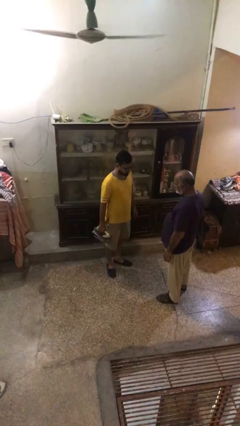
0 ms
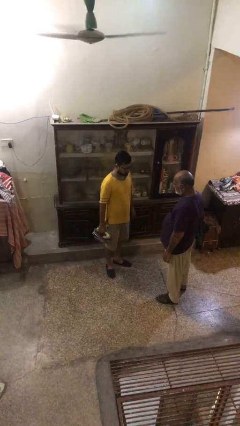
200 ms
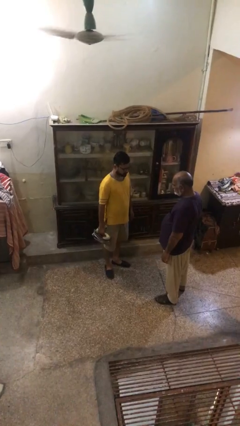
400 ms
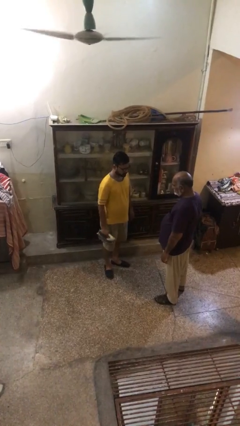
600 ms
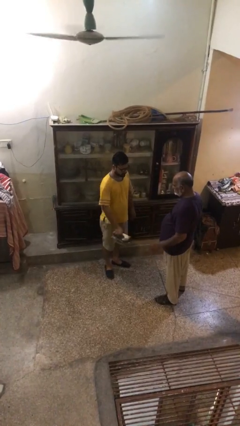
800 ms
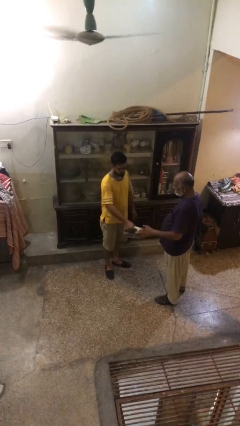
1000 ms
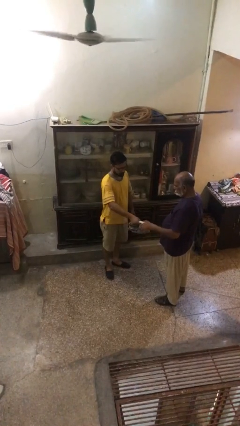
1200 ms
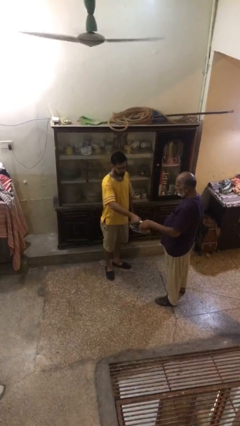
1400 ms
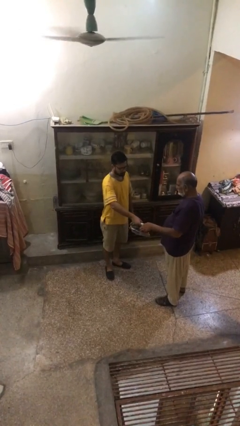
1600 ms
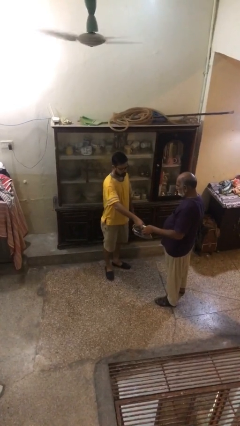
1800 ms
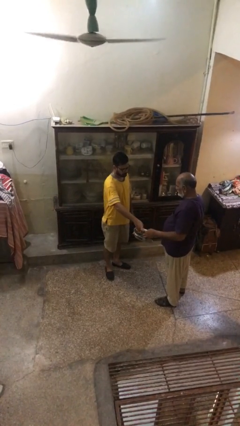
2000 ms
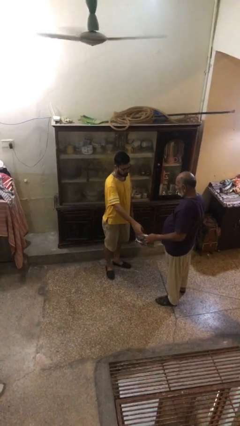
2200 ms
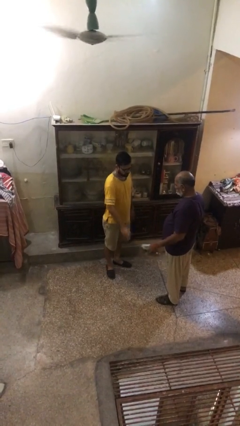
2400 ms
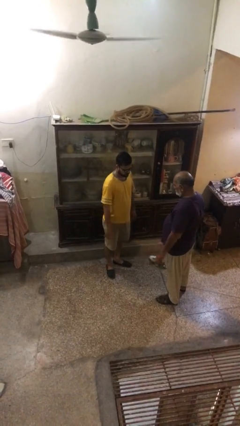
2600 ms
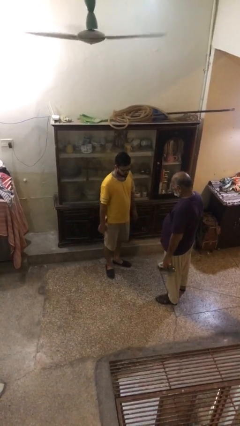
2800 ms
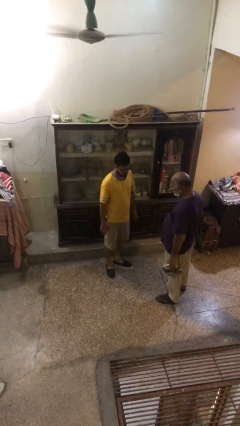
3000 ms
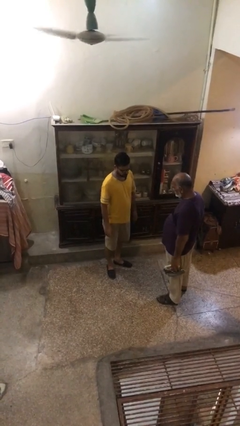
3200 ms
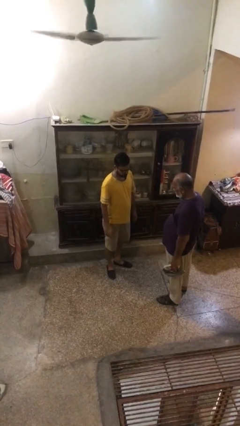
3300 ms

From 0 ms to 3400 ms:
person transfers object to person

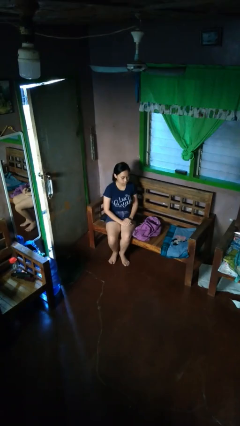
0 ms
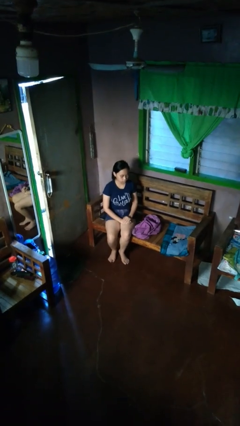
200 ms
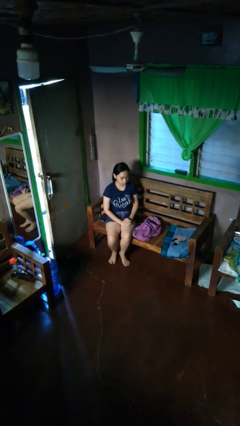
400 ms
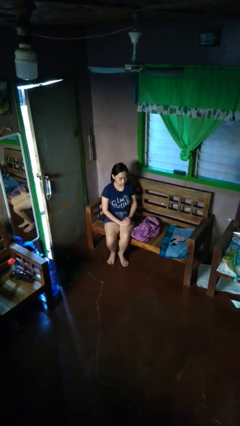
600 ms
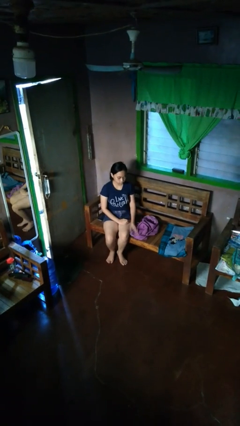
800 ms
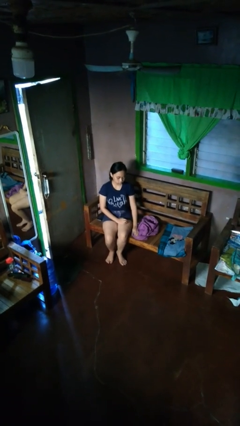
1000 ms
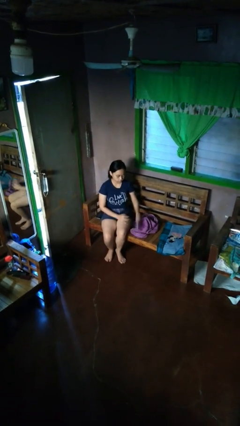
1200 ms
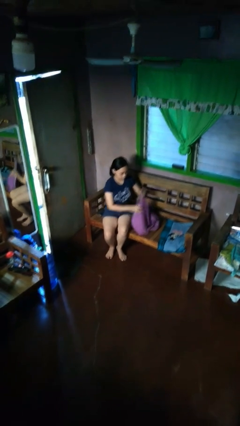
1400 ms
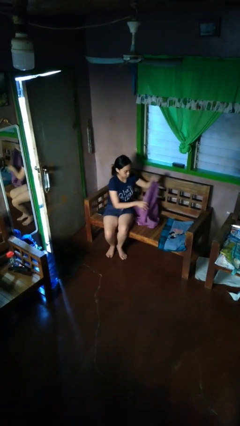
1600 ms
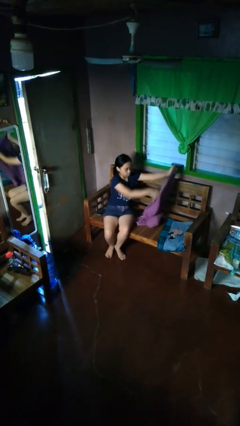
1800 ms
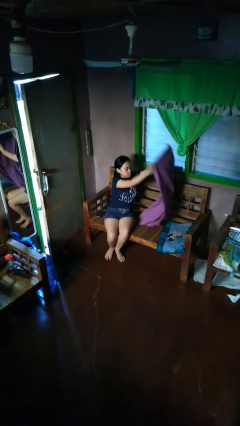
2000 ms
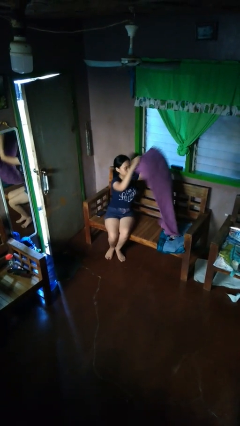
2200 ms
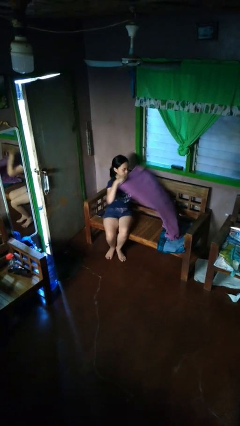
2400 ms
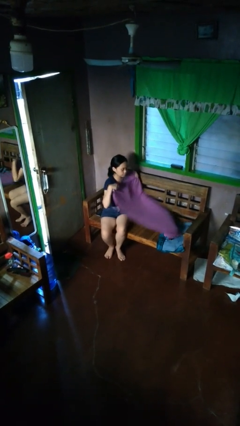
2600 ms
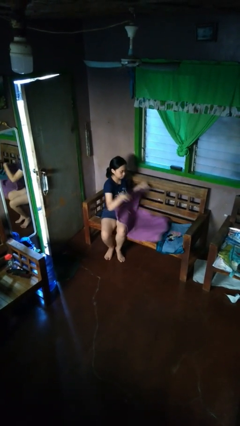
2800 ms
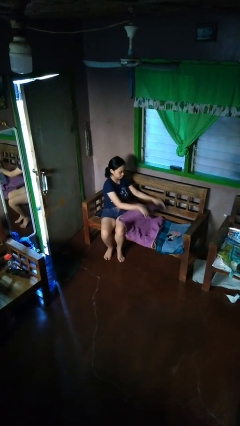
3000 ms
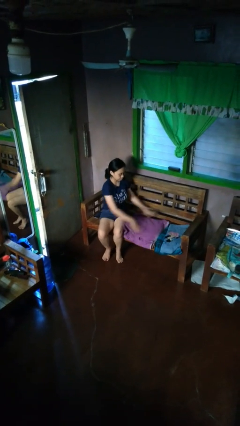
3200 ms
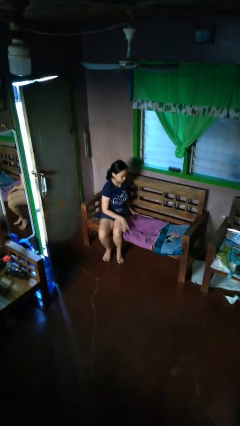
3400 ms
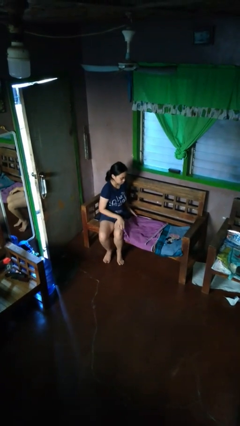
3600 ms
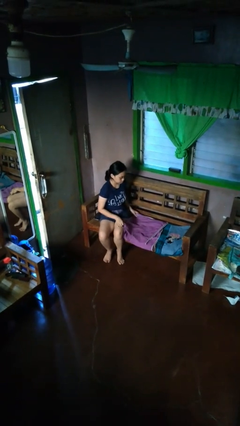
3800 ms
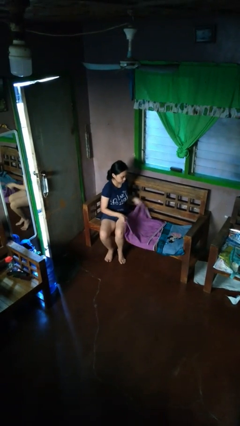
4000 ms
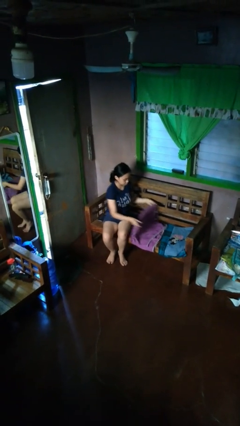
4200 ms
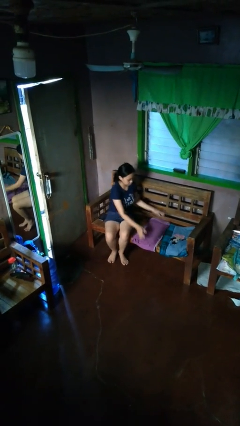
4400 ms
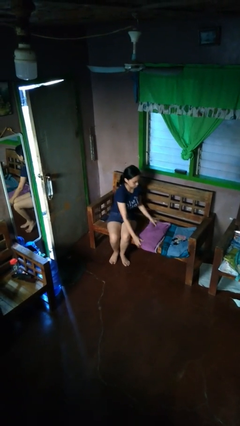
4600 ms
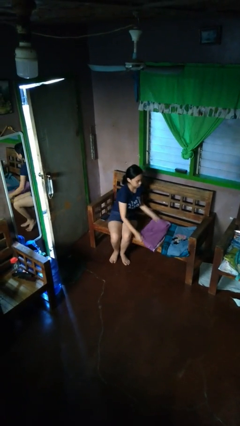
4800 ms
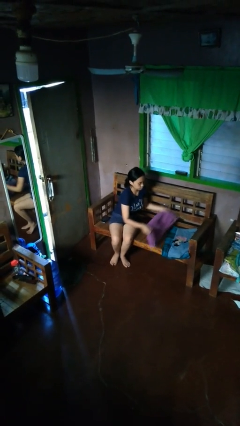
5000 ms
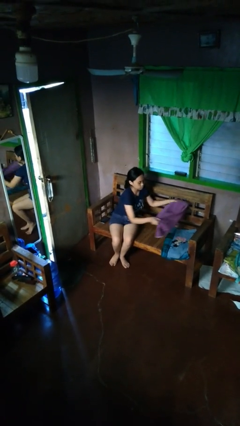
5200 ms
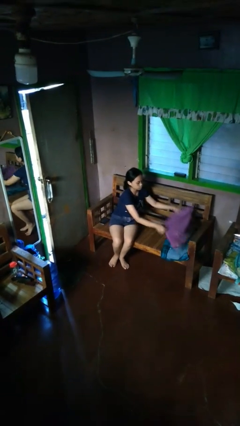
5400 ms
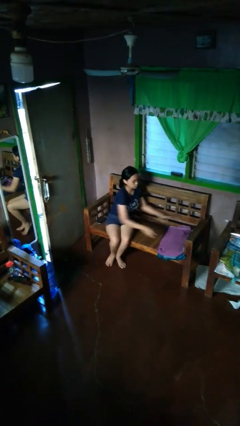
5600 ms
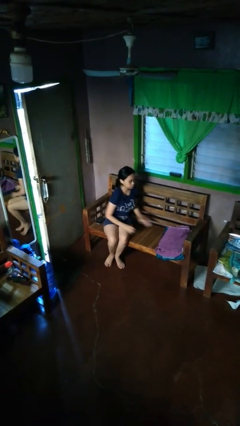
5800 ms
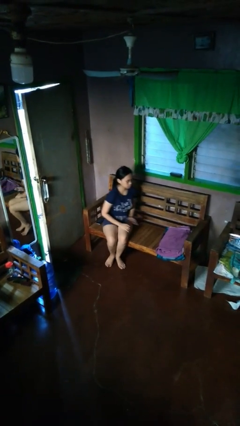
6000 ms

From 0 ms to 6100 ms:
person folds blanket

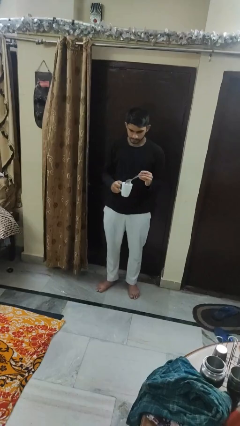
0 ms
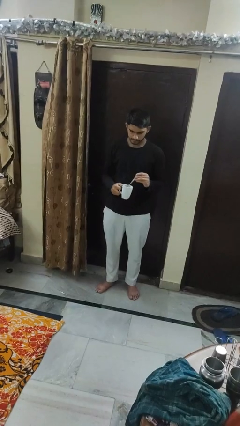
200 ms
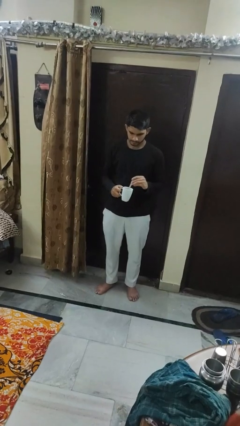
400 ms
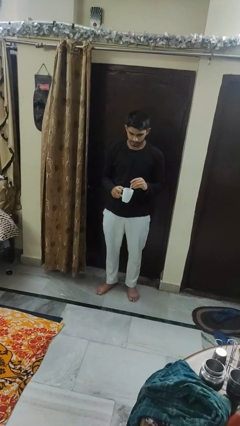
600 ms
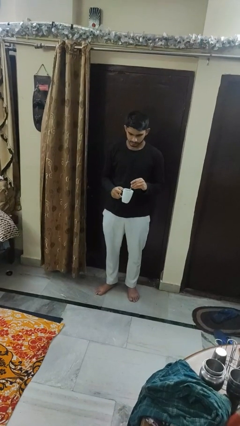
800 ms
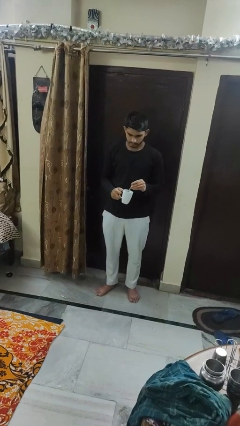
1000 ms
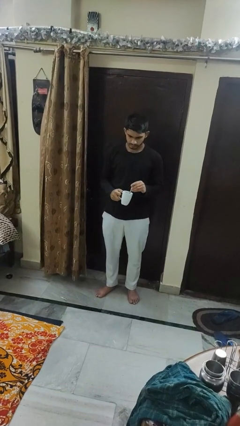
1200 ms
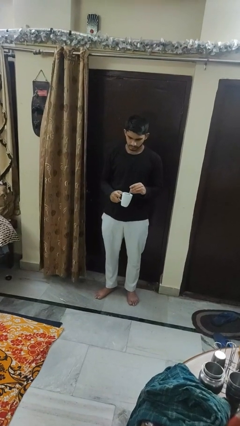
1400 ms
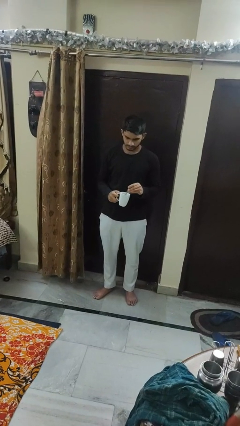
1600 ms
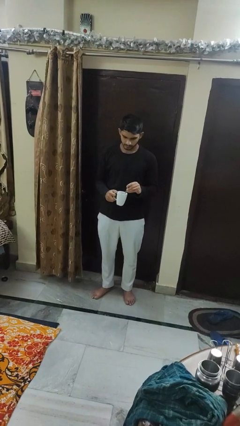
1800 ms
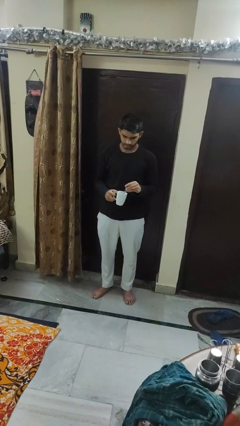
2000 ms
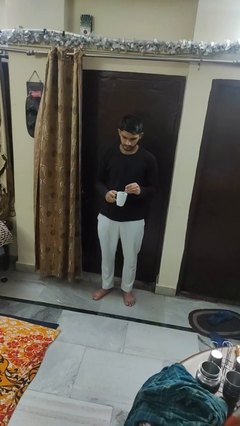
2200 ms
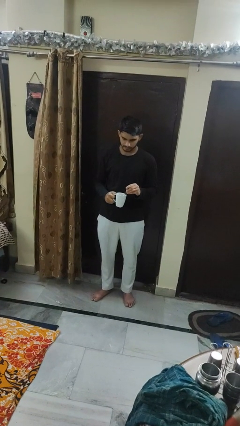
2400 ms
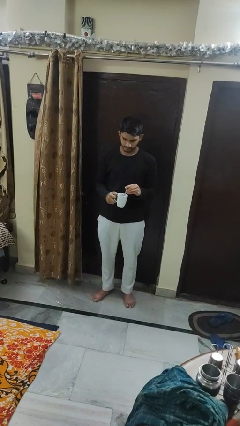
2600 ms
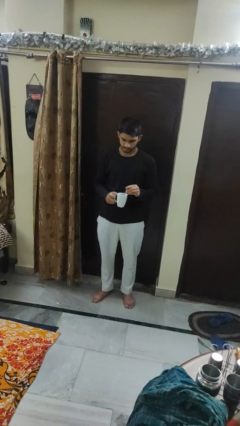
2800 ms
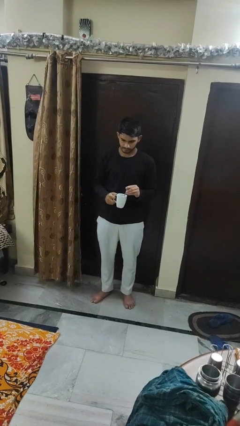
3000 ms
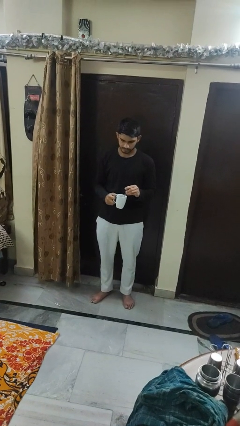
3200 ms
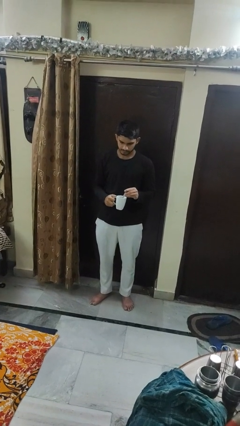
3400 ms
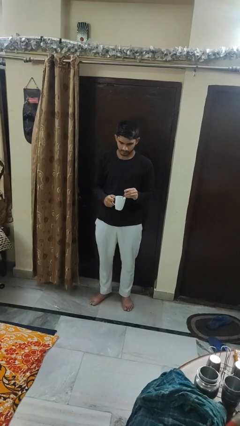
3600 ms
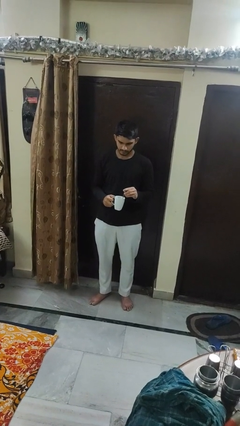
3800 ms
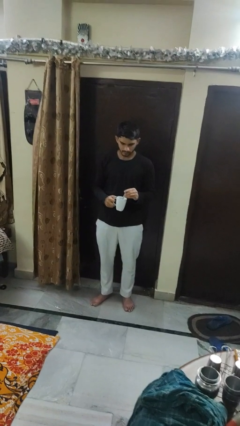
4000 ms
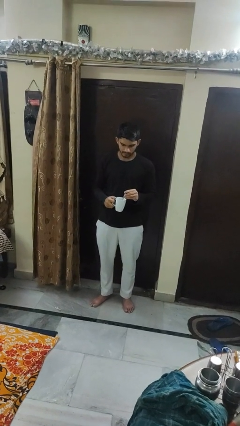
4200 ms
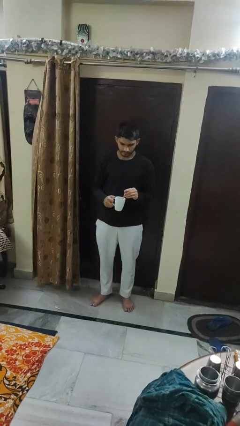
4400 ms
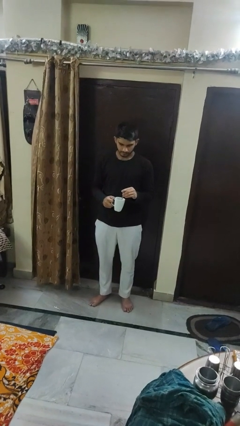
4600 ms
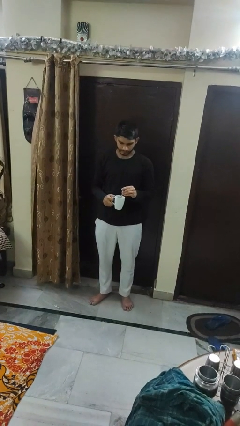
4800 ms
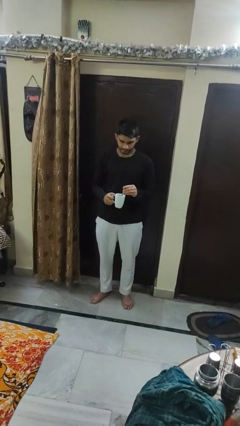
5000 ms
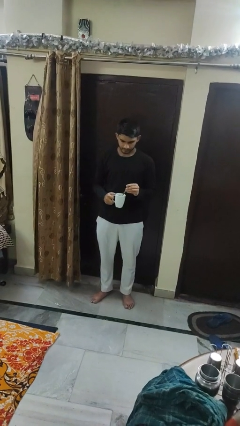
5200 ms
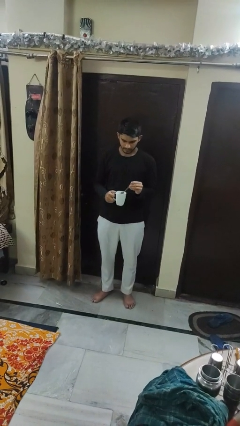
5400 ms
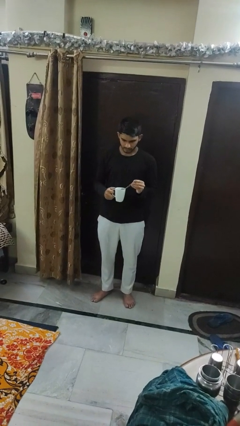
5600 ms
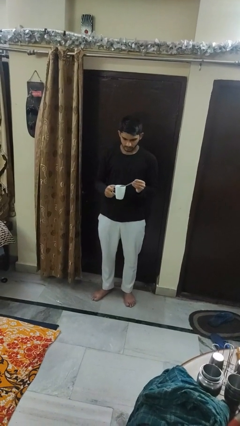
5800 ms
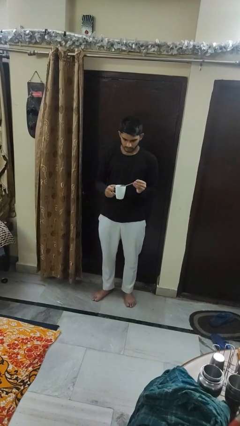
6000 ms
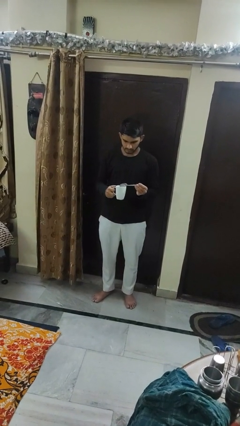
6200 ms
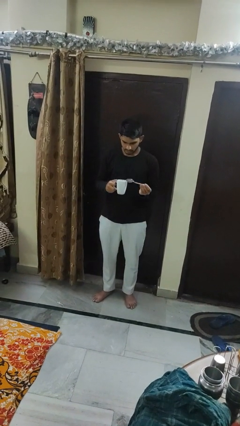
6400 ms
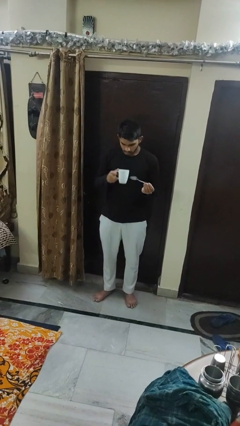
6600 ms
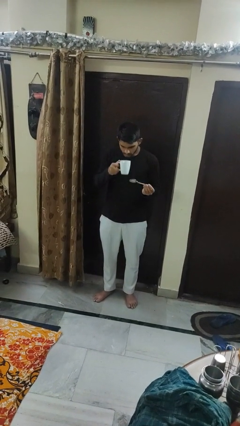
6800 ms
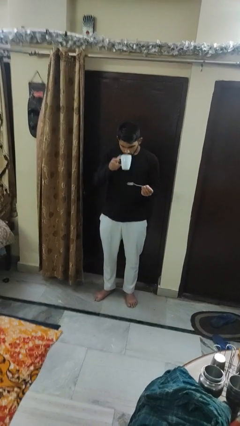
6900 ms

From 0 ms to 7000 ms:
person stirs mug

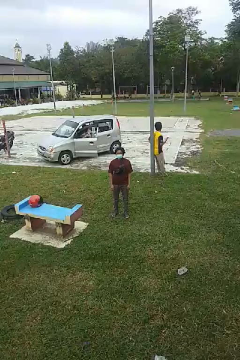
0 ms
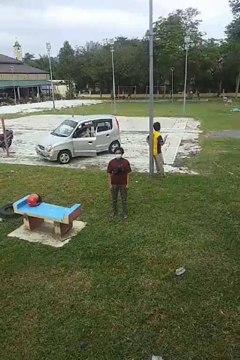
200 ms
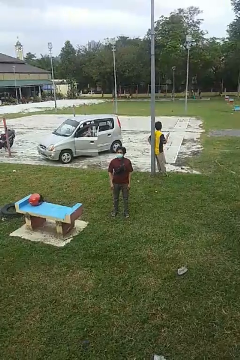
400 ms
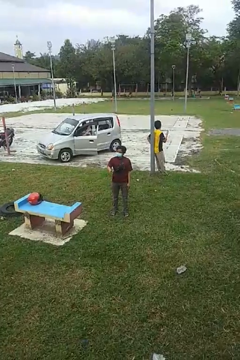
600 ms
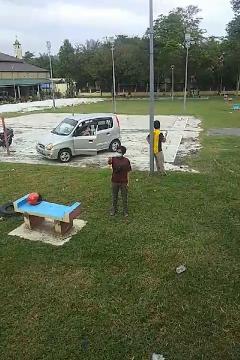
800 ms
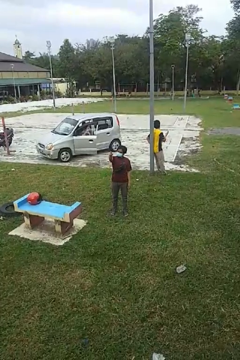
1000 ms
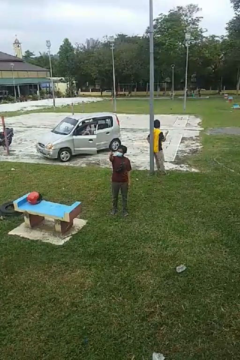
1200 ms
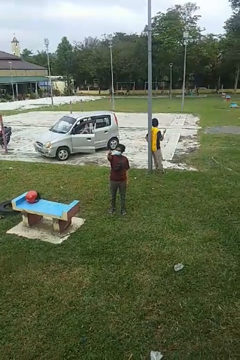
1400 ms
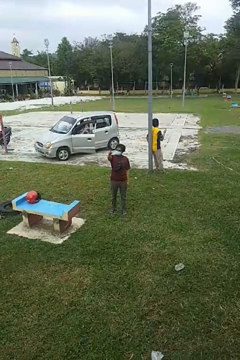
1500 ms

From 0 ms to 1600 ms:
person points at person
